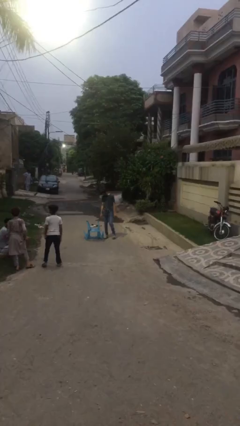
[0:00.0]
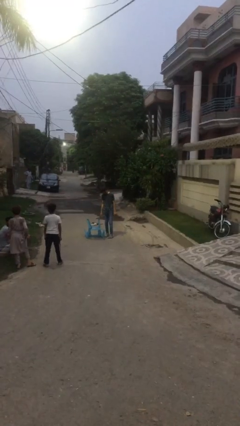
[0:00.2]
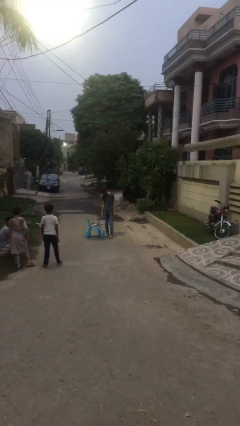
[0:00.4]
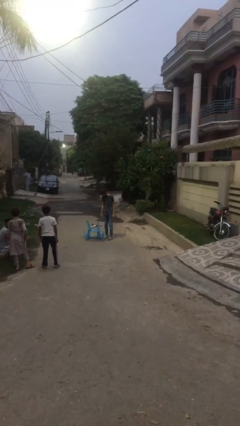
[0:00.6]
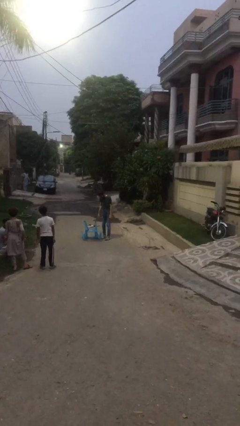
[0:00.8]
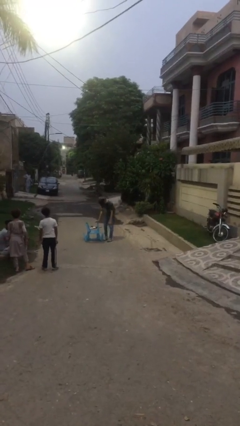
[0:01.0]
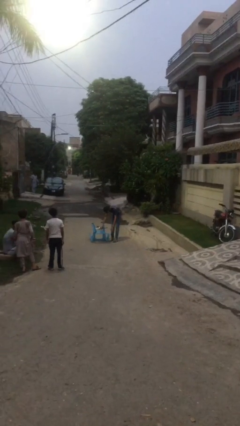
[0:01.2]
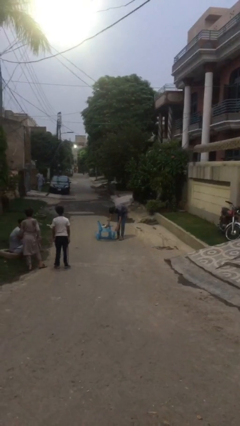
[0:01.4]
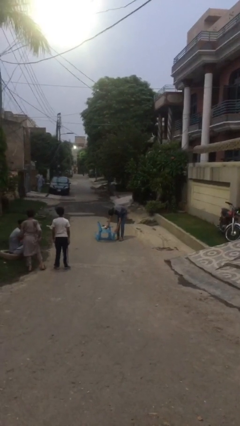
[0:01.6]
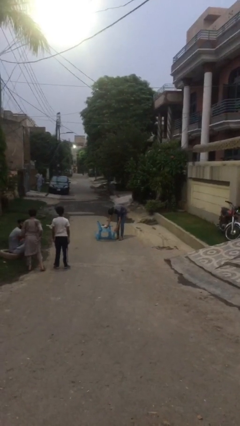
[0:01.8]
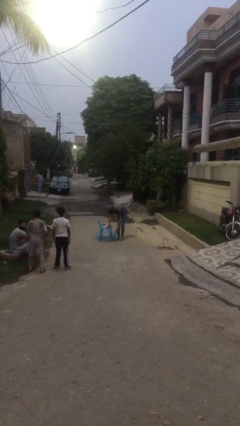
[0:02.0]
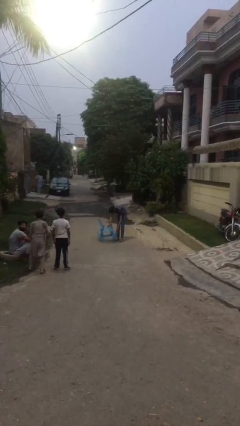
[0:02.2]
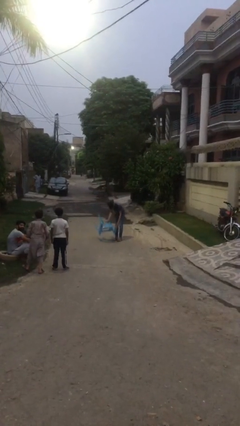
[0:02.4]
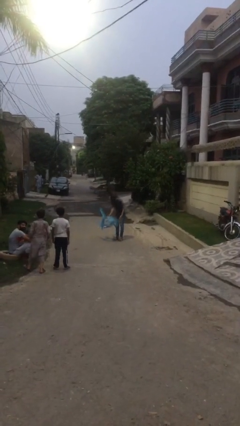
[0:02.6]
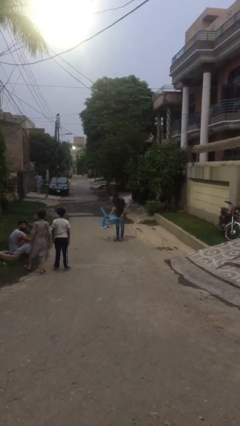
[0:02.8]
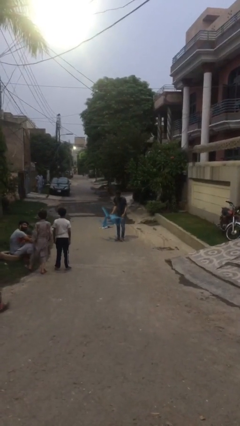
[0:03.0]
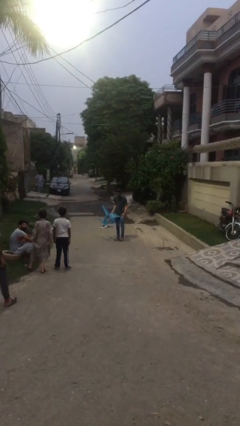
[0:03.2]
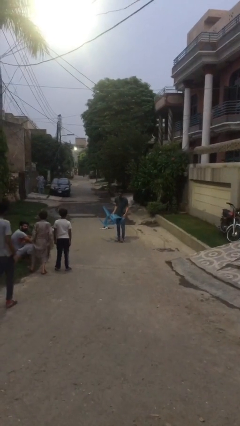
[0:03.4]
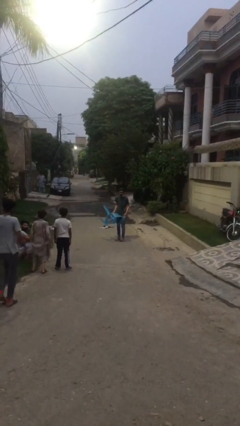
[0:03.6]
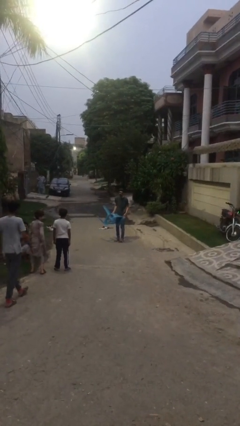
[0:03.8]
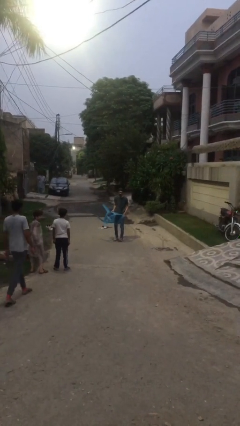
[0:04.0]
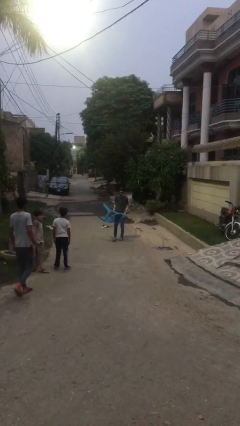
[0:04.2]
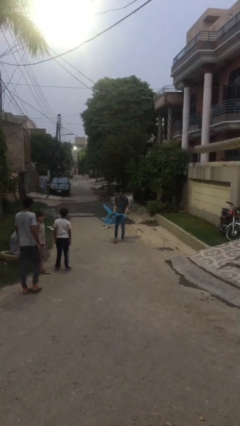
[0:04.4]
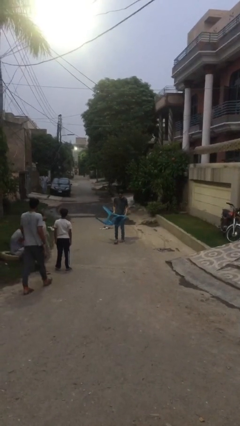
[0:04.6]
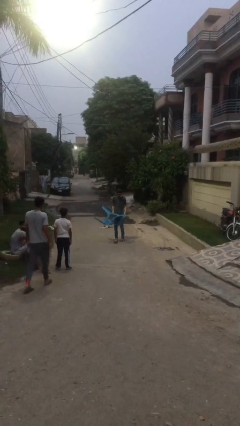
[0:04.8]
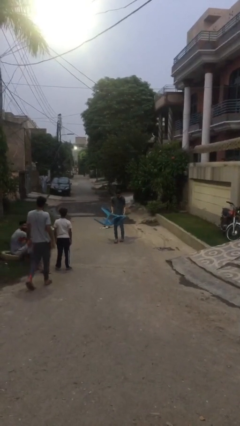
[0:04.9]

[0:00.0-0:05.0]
person carries heavy object

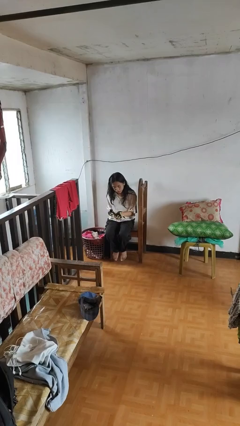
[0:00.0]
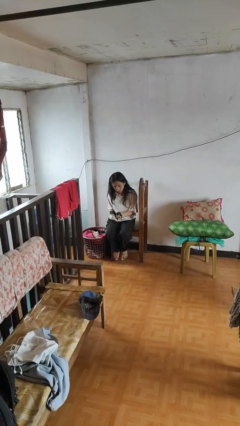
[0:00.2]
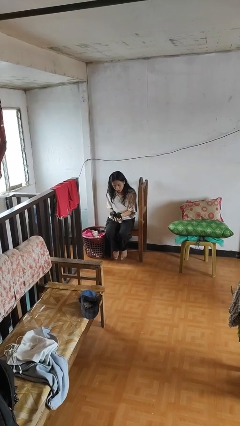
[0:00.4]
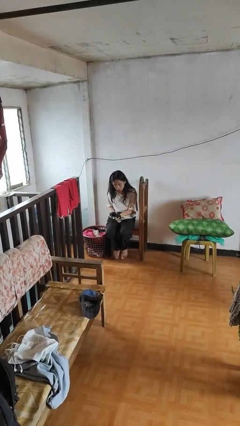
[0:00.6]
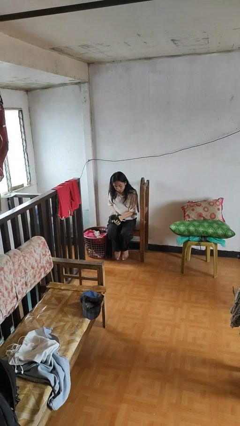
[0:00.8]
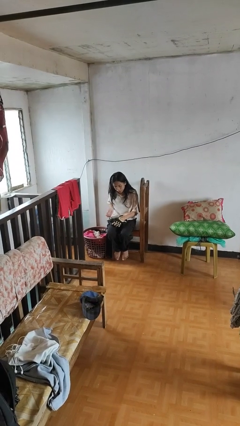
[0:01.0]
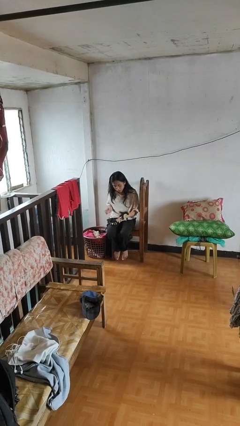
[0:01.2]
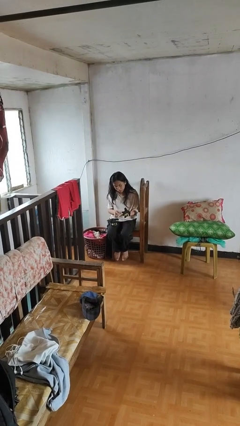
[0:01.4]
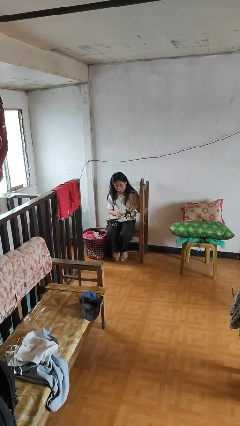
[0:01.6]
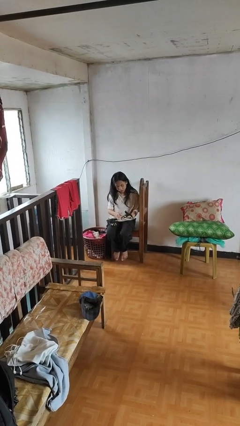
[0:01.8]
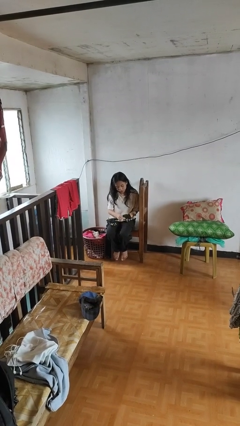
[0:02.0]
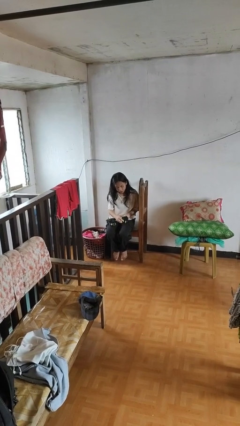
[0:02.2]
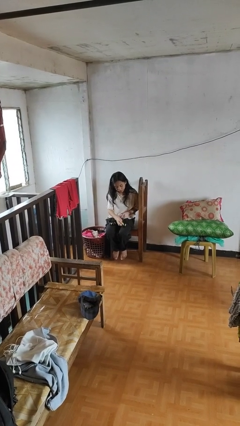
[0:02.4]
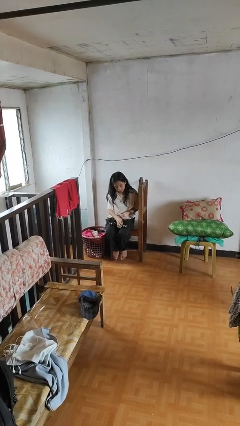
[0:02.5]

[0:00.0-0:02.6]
person takes off gloves

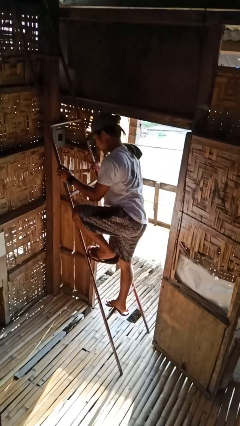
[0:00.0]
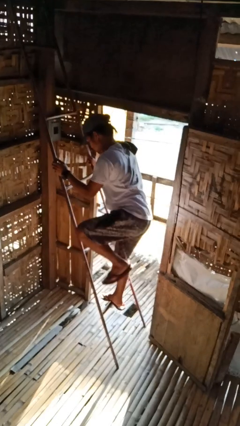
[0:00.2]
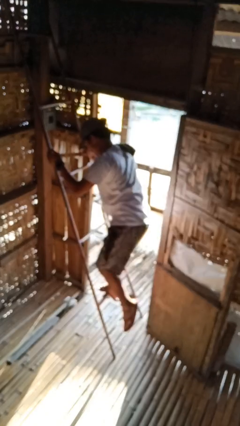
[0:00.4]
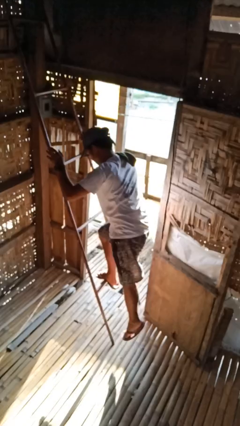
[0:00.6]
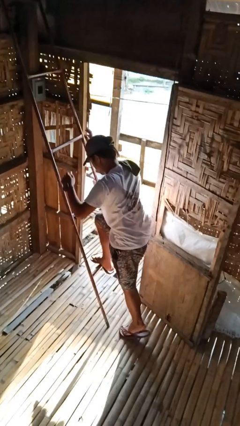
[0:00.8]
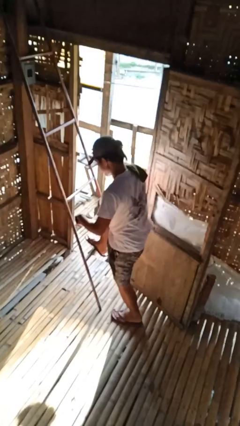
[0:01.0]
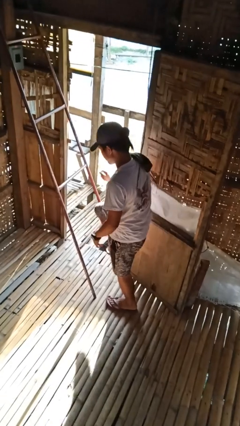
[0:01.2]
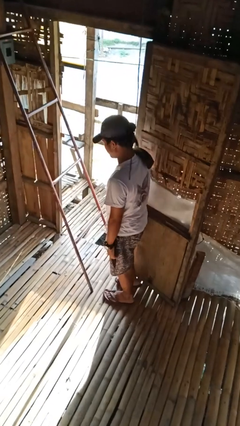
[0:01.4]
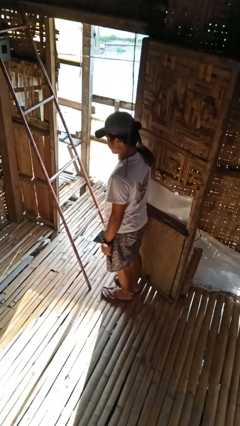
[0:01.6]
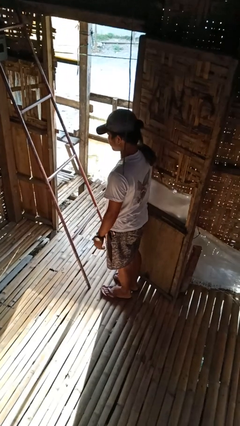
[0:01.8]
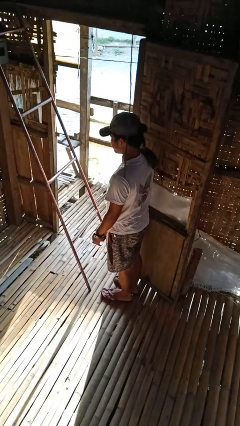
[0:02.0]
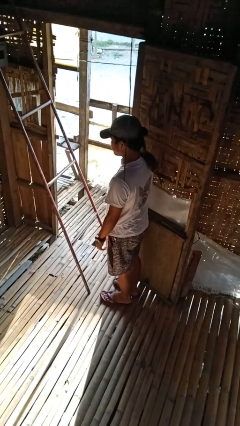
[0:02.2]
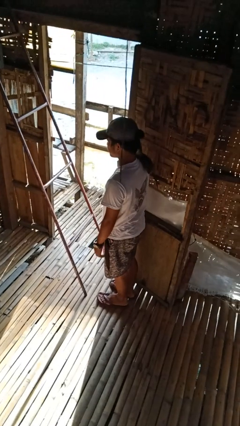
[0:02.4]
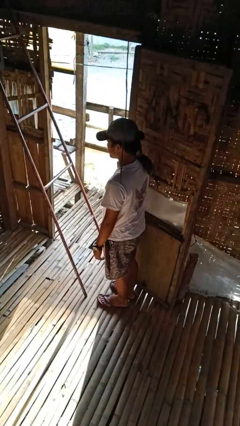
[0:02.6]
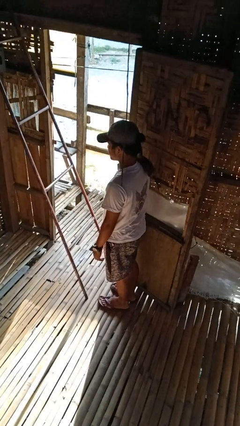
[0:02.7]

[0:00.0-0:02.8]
person climbs down ladder

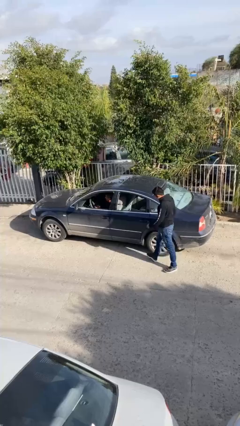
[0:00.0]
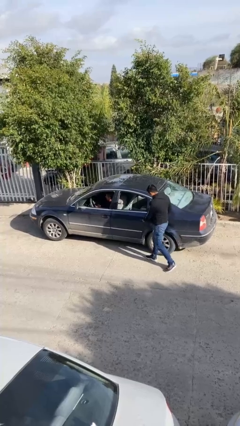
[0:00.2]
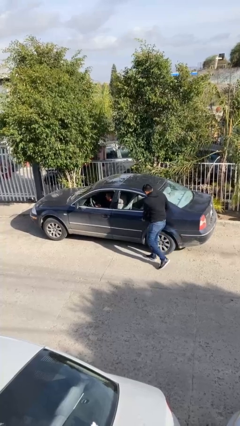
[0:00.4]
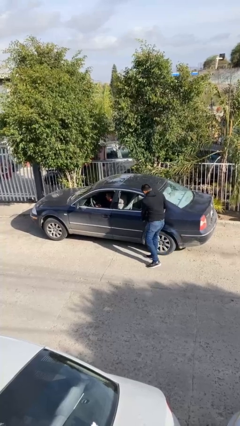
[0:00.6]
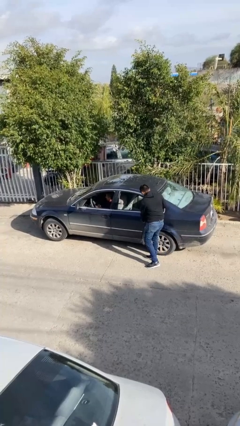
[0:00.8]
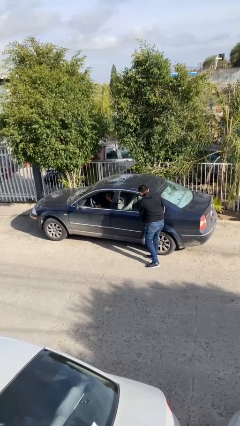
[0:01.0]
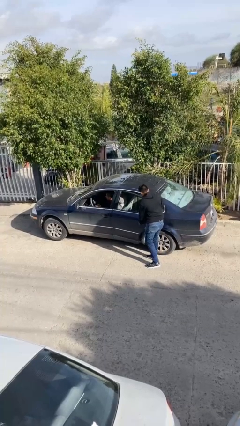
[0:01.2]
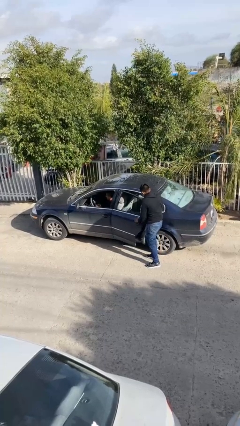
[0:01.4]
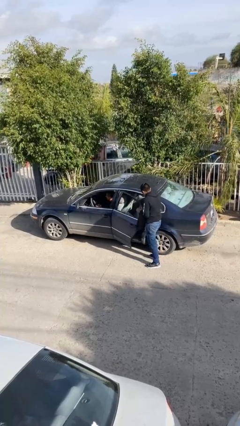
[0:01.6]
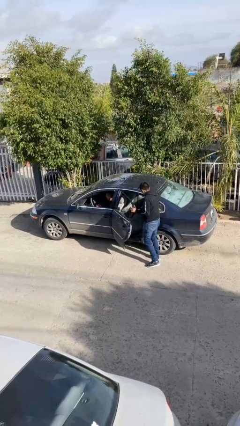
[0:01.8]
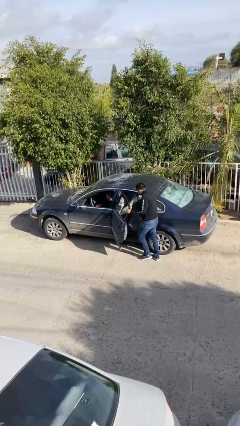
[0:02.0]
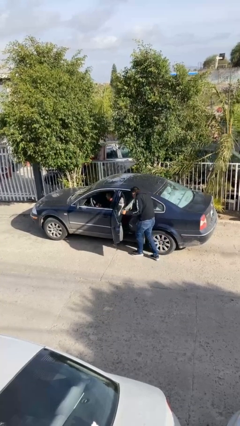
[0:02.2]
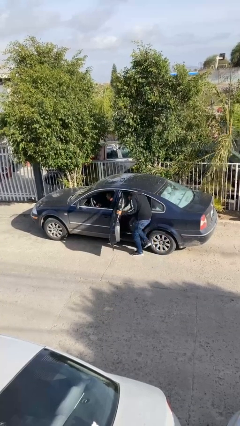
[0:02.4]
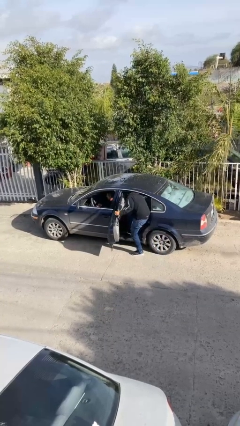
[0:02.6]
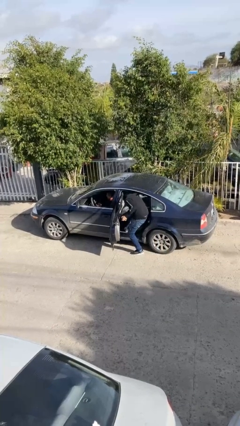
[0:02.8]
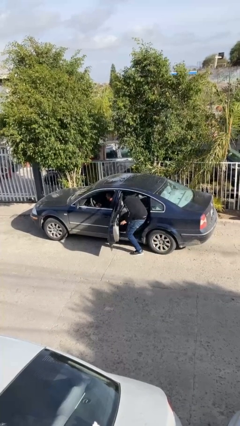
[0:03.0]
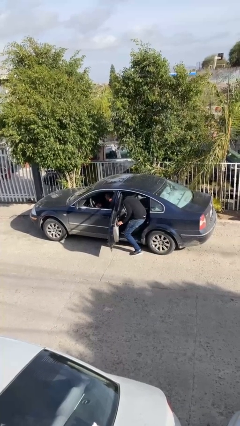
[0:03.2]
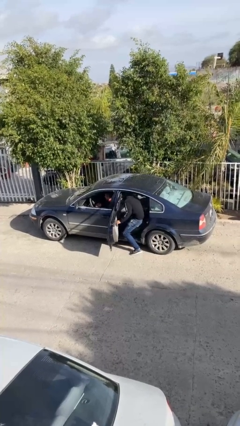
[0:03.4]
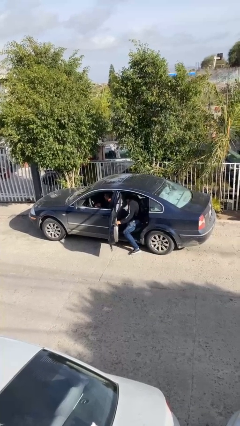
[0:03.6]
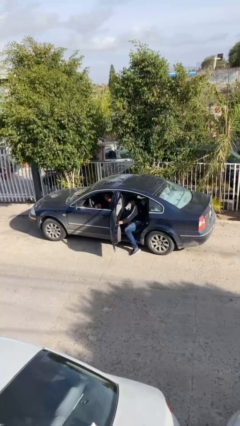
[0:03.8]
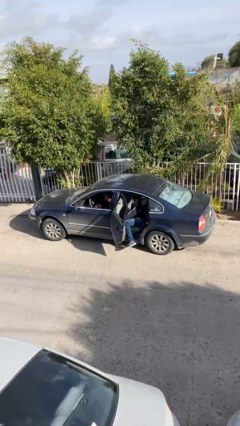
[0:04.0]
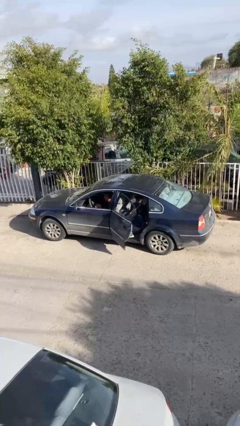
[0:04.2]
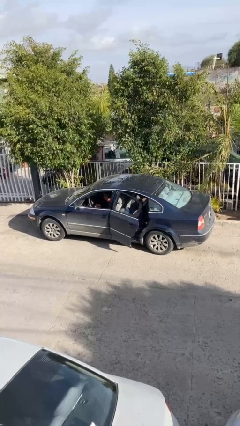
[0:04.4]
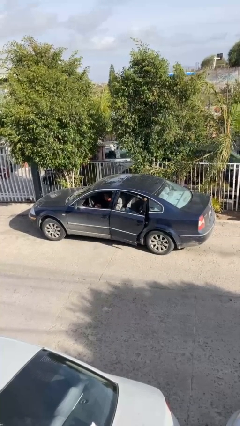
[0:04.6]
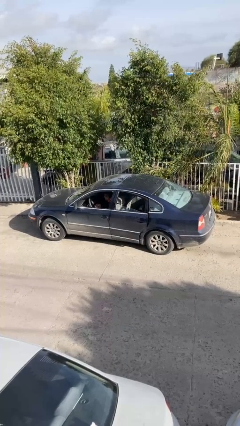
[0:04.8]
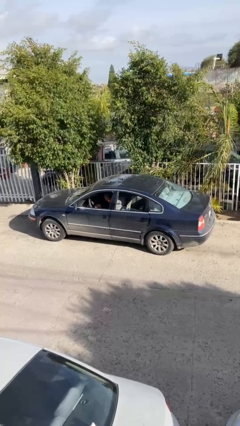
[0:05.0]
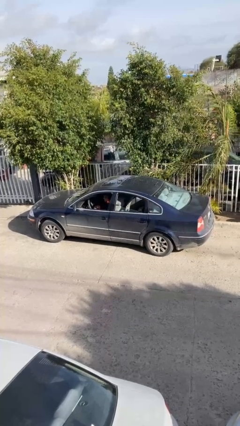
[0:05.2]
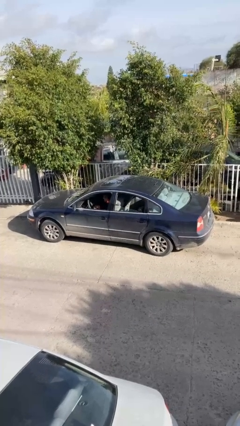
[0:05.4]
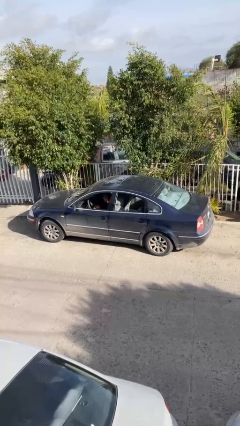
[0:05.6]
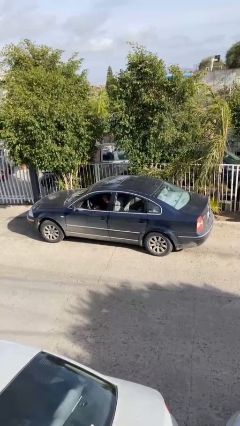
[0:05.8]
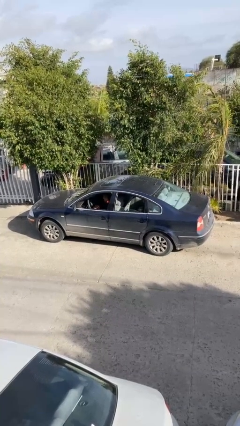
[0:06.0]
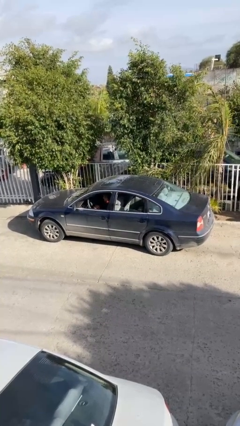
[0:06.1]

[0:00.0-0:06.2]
car picks up person

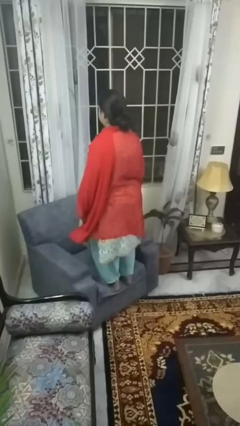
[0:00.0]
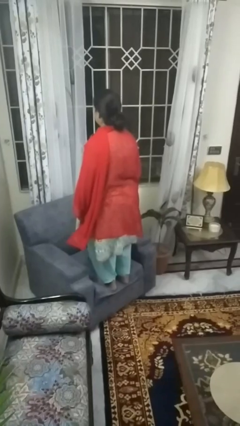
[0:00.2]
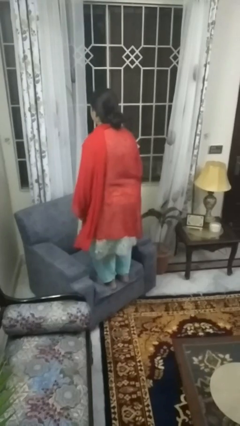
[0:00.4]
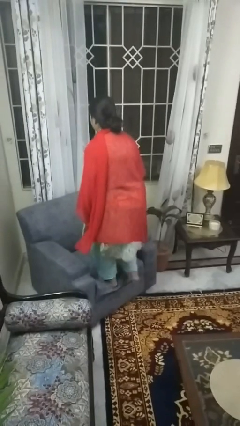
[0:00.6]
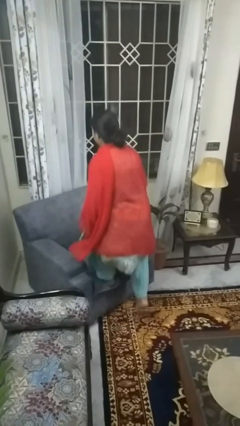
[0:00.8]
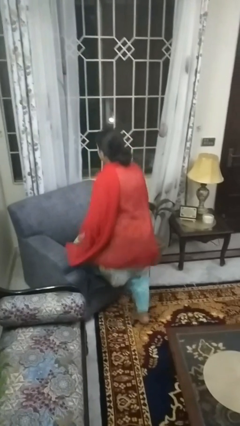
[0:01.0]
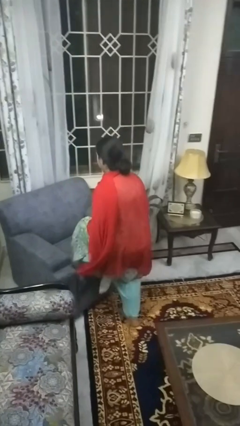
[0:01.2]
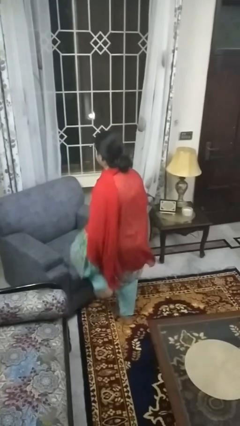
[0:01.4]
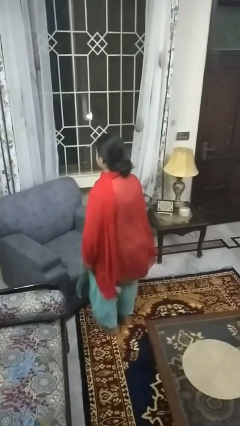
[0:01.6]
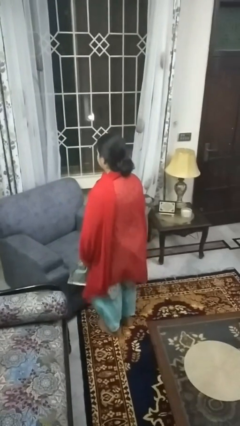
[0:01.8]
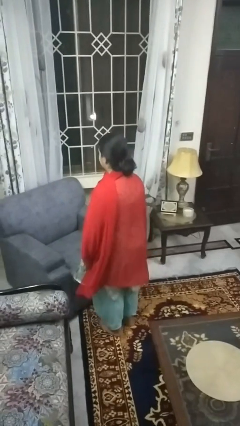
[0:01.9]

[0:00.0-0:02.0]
person climbs off couch
